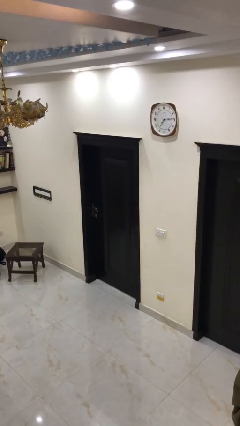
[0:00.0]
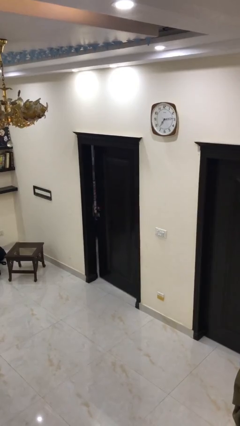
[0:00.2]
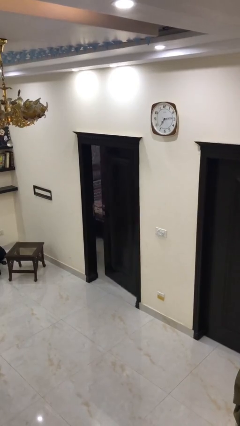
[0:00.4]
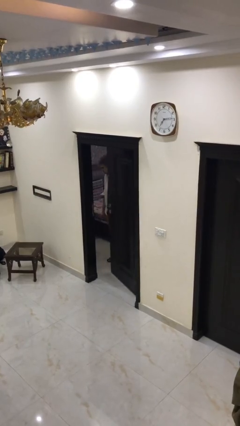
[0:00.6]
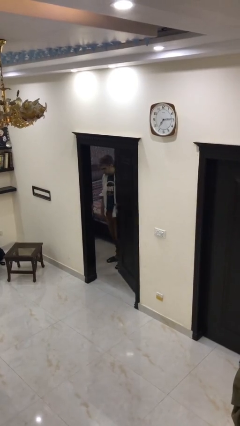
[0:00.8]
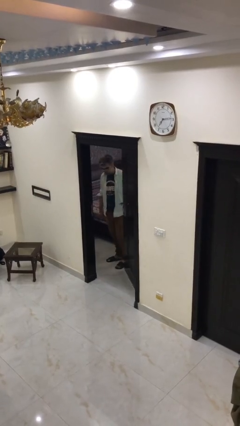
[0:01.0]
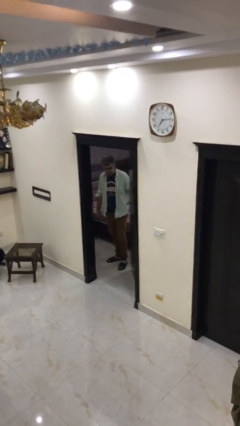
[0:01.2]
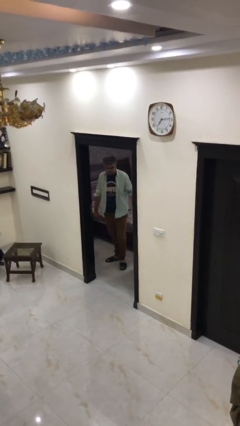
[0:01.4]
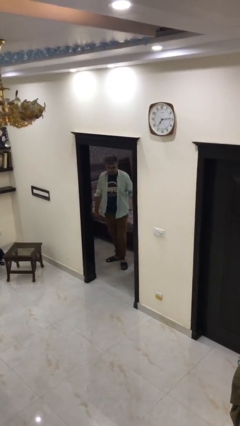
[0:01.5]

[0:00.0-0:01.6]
person opens facility door

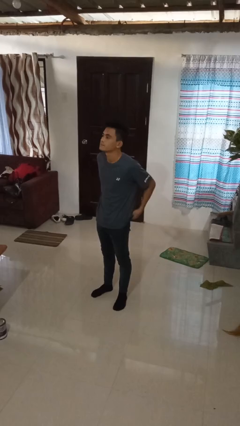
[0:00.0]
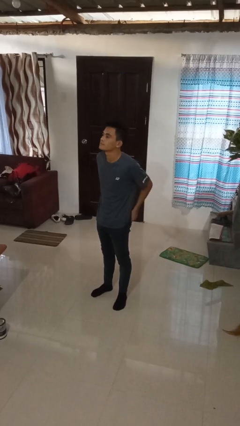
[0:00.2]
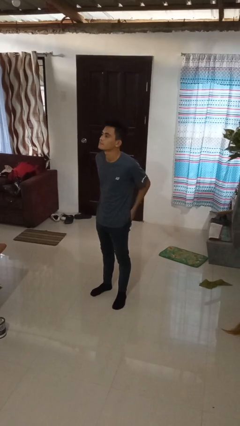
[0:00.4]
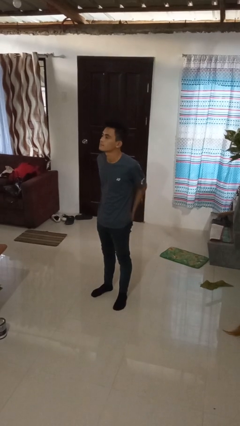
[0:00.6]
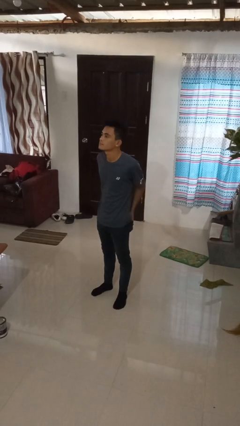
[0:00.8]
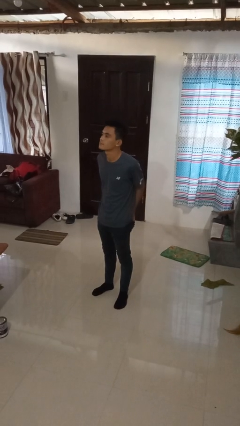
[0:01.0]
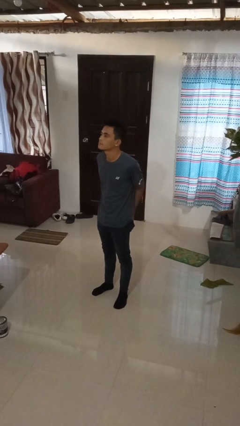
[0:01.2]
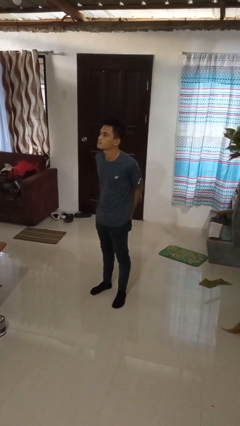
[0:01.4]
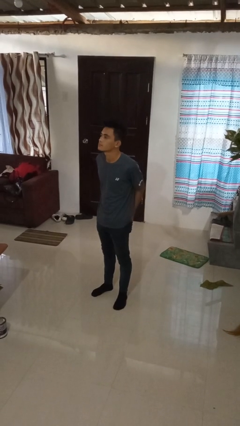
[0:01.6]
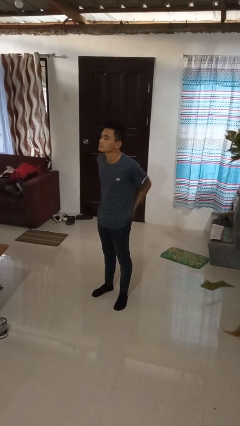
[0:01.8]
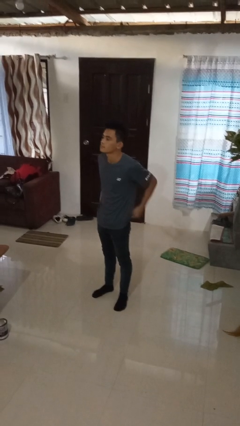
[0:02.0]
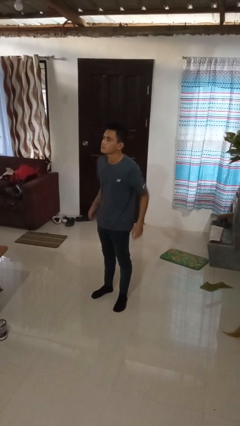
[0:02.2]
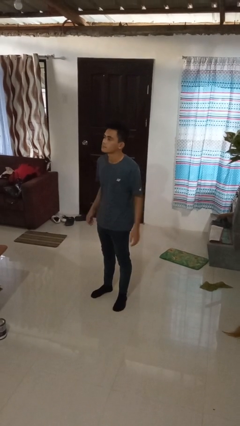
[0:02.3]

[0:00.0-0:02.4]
person puts hands in back pockets

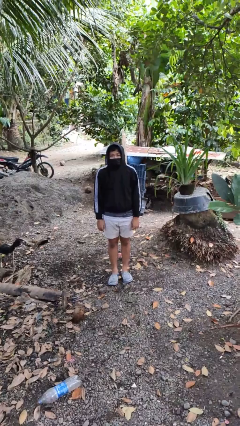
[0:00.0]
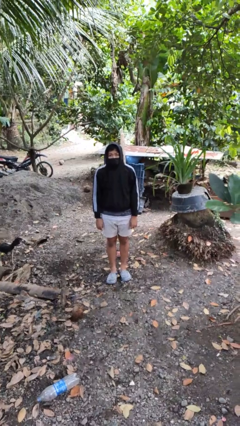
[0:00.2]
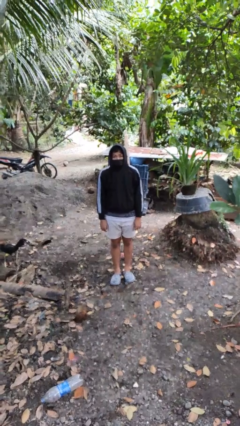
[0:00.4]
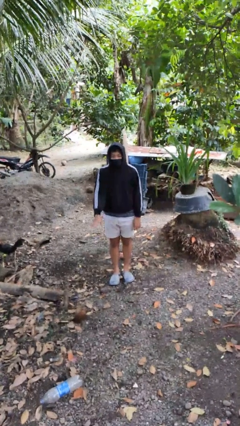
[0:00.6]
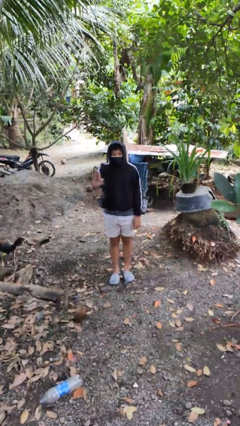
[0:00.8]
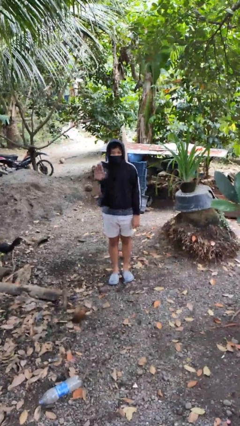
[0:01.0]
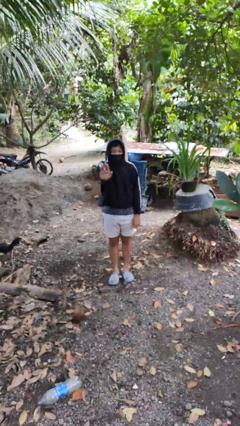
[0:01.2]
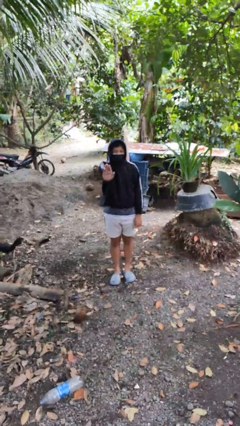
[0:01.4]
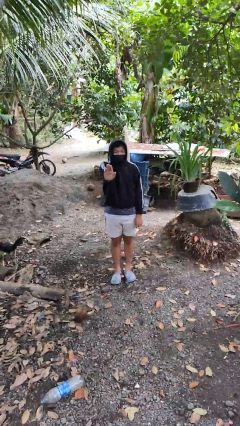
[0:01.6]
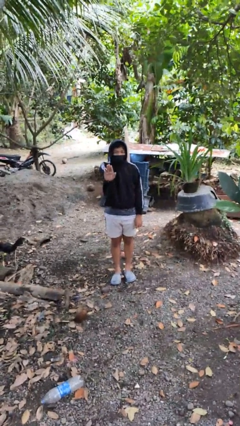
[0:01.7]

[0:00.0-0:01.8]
person gestures stop

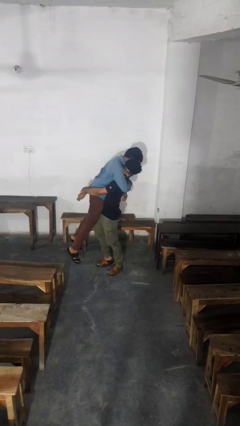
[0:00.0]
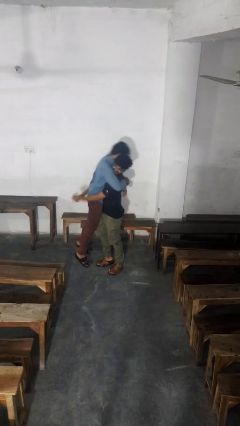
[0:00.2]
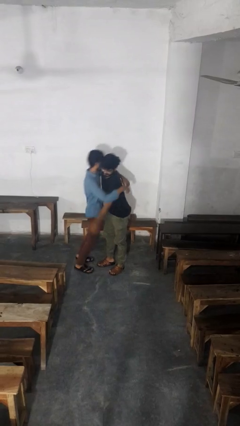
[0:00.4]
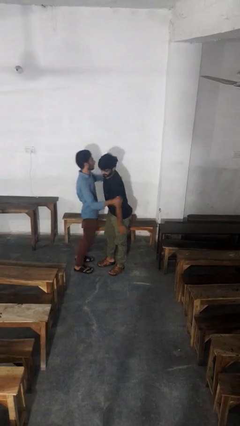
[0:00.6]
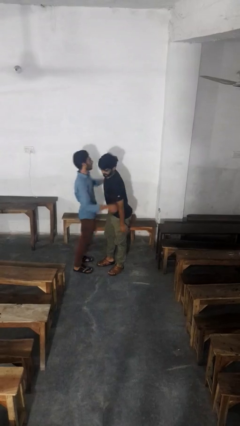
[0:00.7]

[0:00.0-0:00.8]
person puts down person

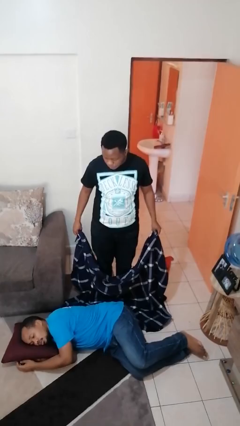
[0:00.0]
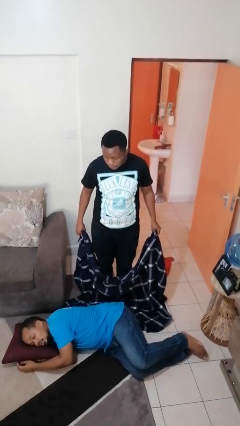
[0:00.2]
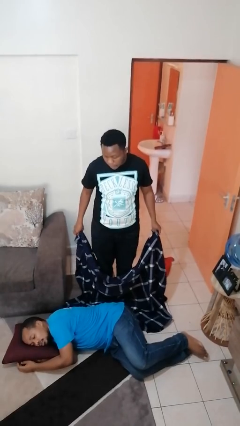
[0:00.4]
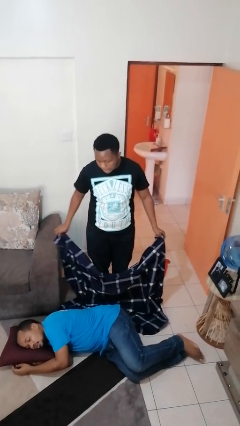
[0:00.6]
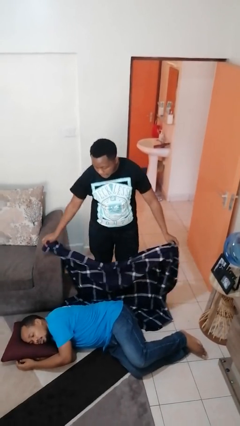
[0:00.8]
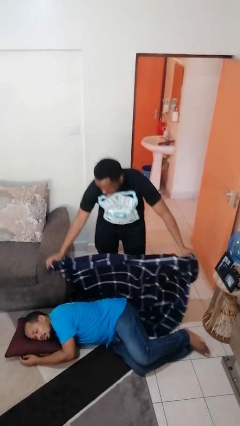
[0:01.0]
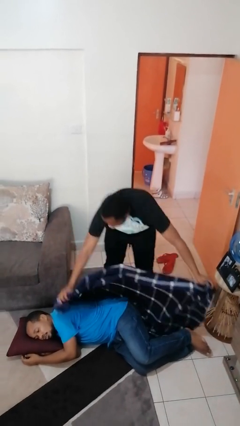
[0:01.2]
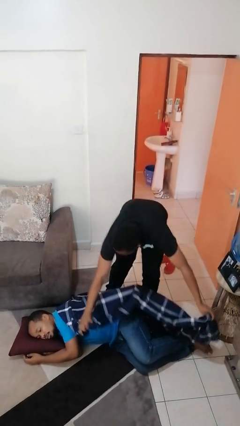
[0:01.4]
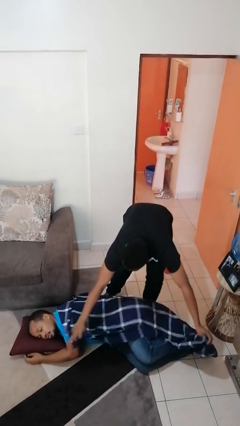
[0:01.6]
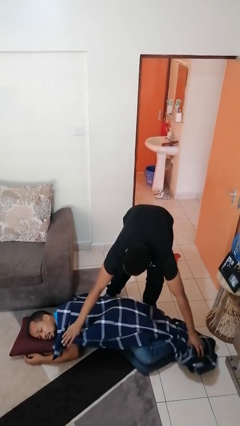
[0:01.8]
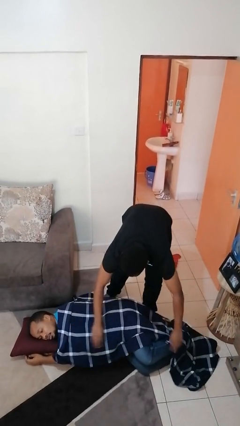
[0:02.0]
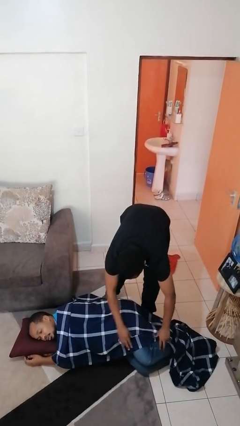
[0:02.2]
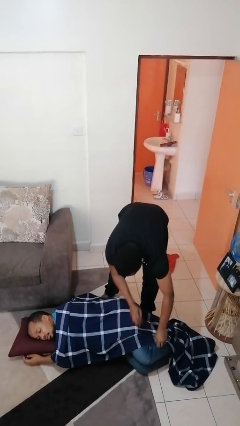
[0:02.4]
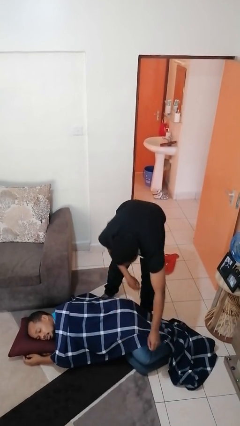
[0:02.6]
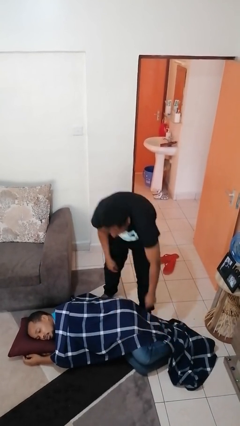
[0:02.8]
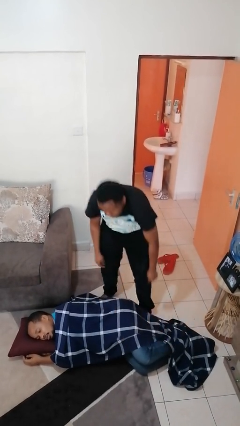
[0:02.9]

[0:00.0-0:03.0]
person covers friend with blanket

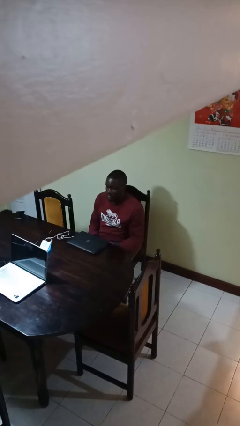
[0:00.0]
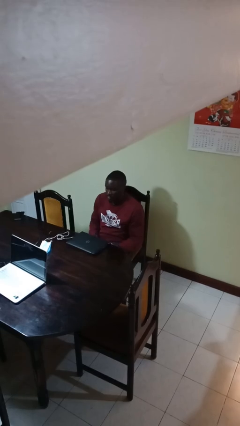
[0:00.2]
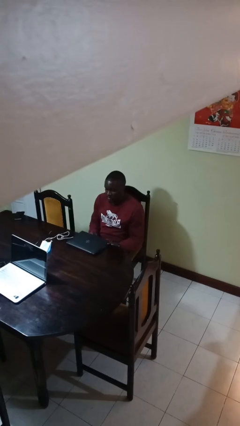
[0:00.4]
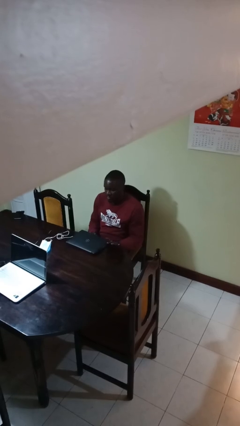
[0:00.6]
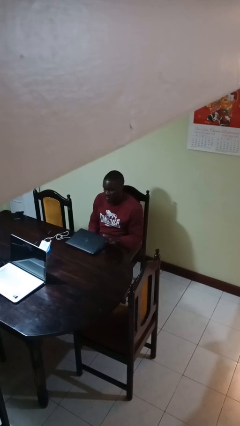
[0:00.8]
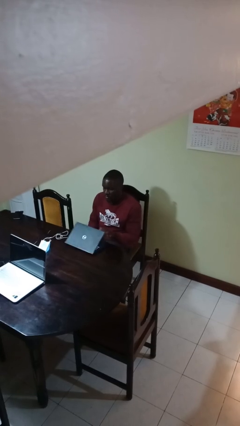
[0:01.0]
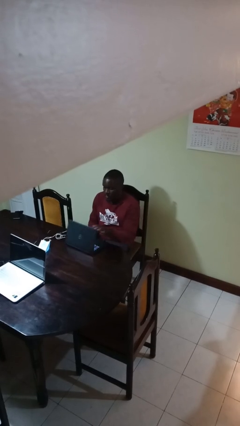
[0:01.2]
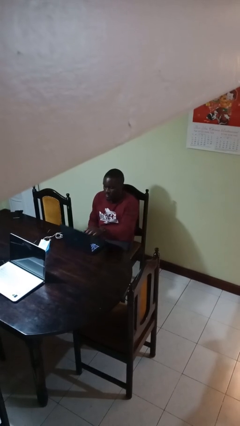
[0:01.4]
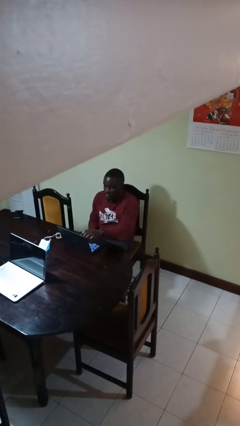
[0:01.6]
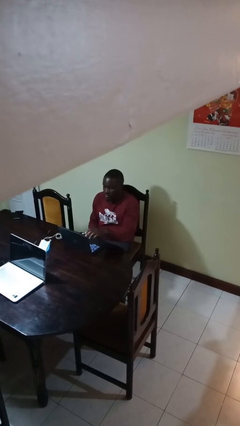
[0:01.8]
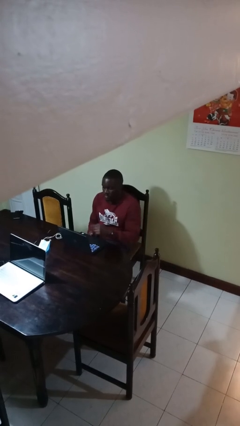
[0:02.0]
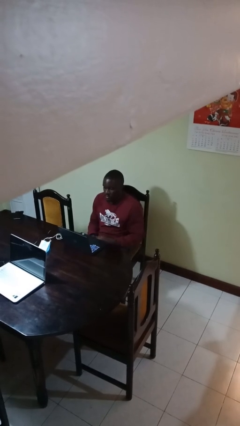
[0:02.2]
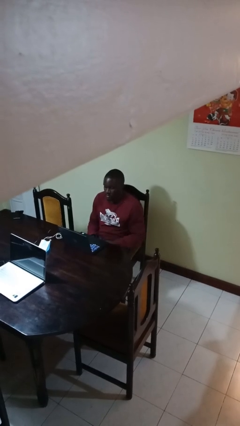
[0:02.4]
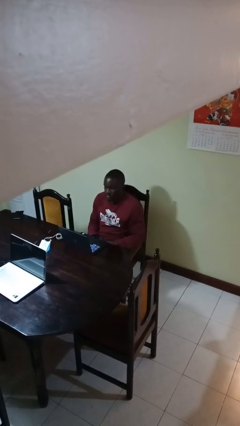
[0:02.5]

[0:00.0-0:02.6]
person opens laptop

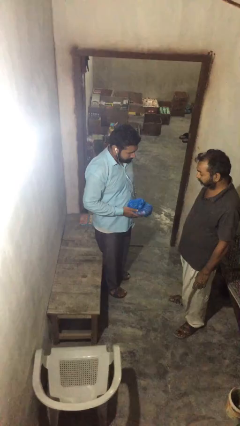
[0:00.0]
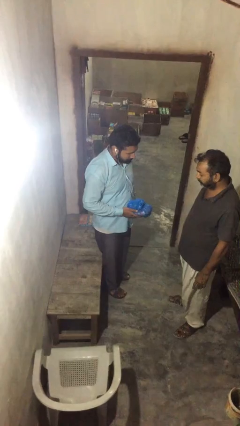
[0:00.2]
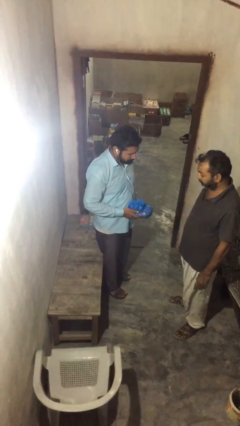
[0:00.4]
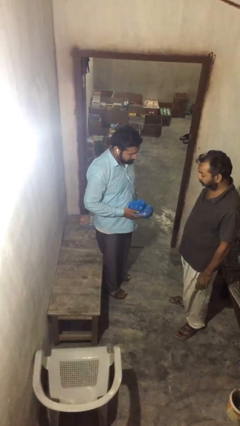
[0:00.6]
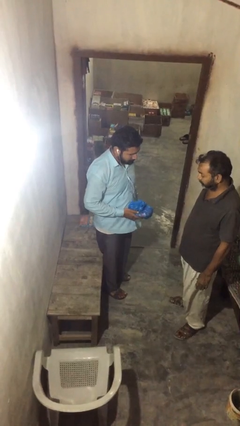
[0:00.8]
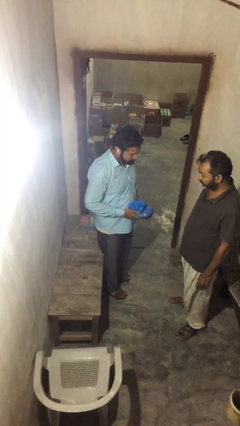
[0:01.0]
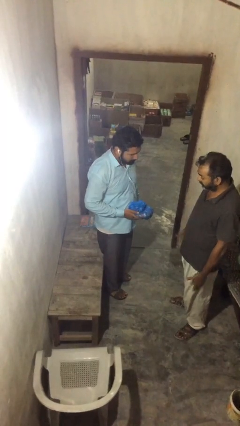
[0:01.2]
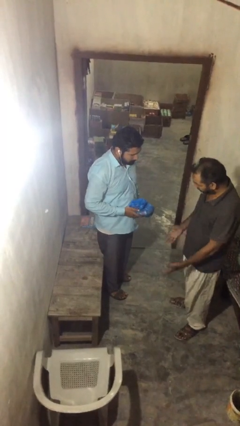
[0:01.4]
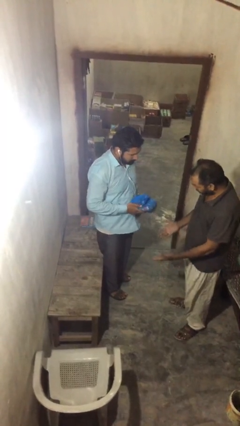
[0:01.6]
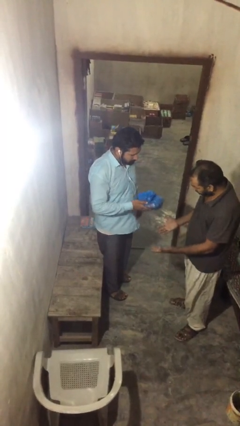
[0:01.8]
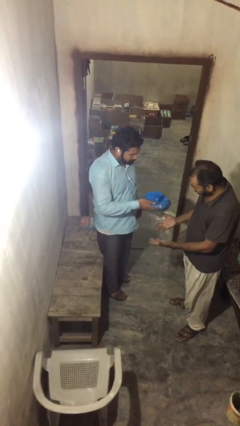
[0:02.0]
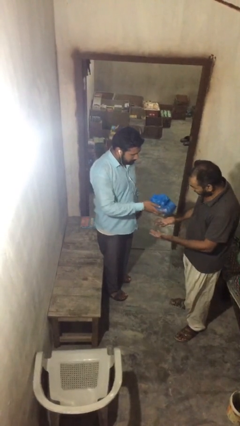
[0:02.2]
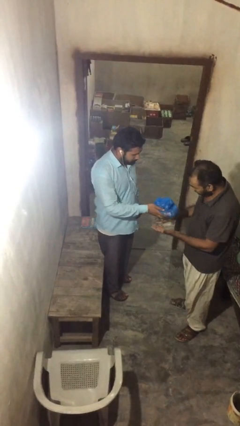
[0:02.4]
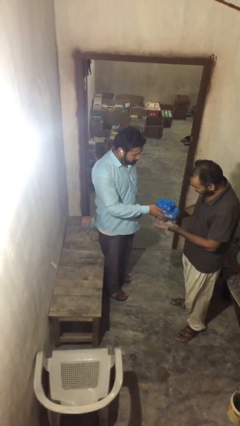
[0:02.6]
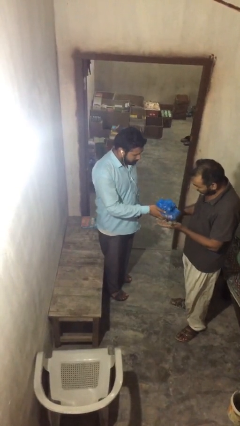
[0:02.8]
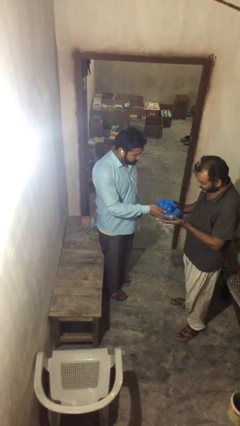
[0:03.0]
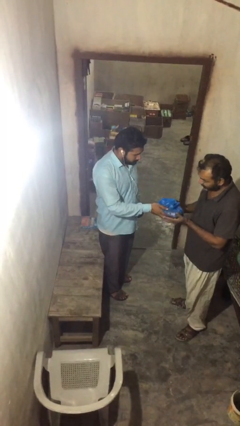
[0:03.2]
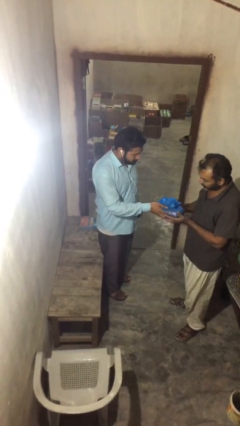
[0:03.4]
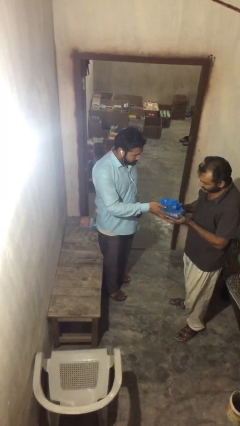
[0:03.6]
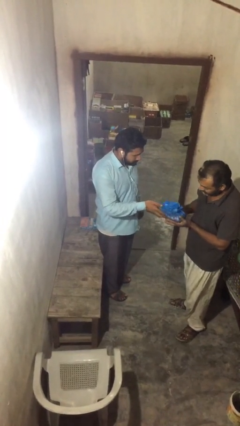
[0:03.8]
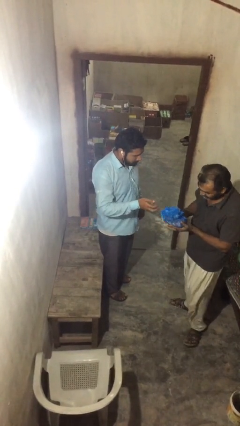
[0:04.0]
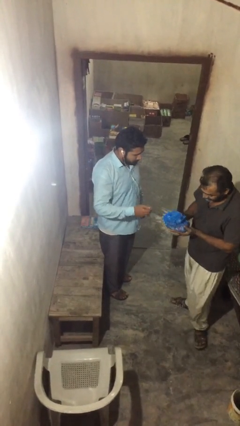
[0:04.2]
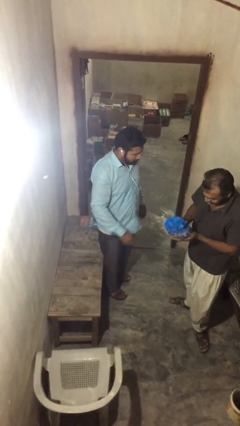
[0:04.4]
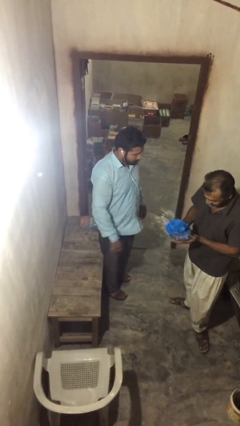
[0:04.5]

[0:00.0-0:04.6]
person transfers object to person
